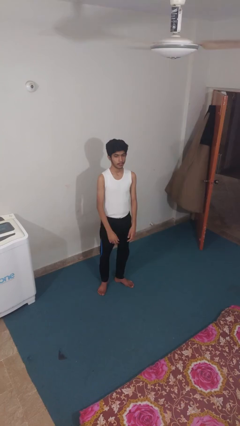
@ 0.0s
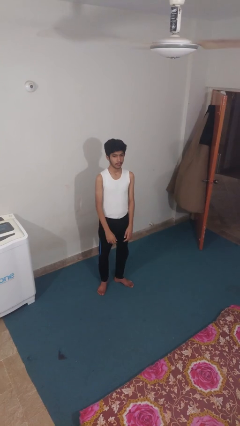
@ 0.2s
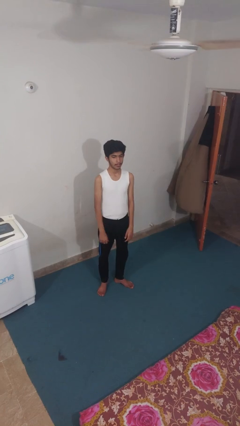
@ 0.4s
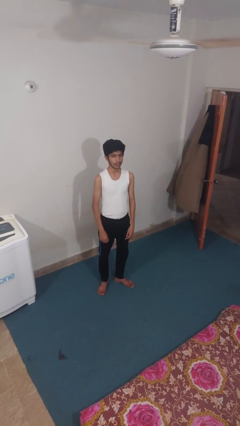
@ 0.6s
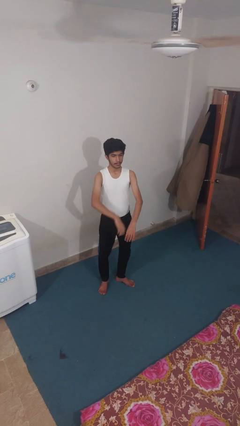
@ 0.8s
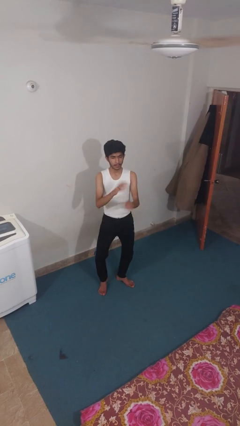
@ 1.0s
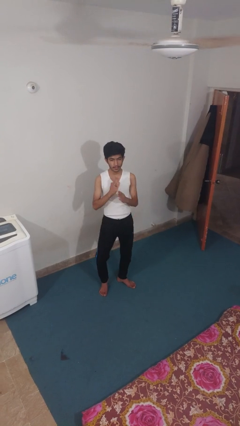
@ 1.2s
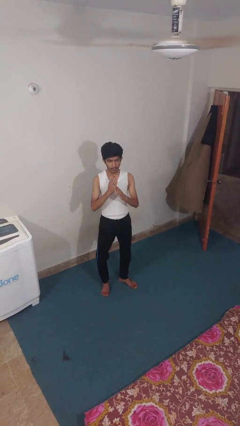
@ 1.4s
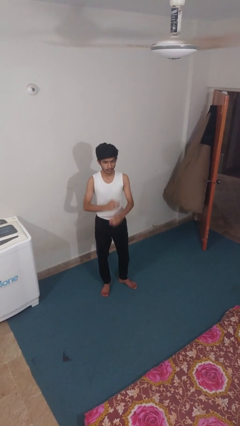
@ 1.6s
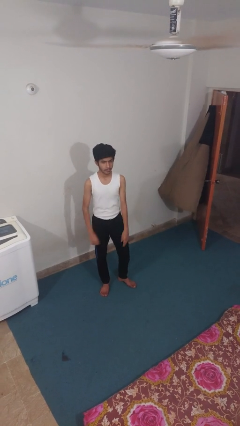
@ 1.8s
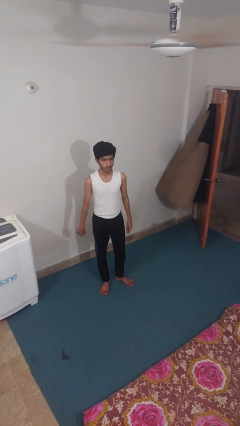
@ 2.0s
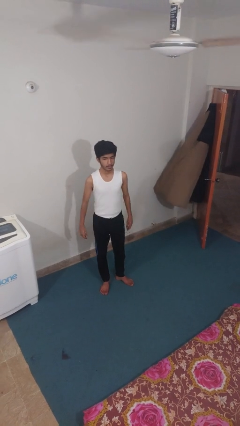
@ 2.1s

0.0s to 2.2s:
person karate chop

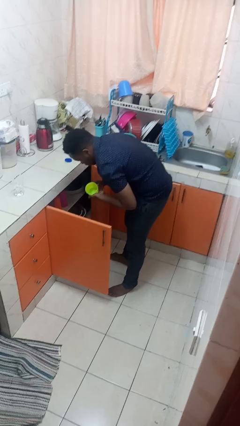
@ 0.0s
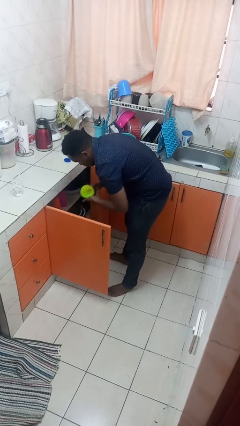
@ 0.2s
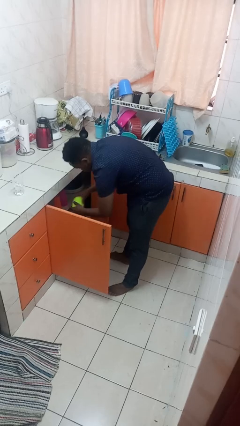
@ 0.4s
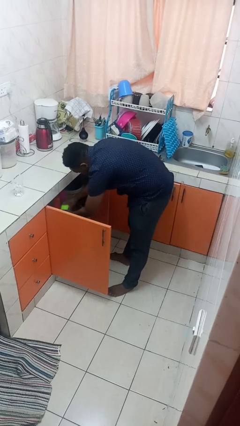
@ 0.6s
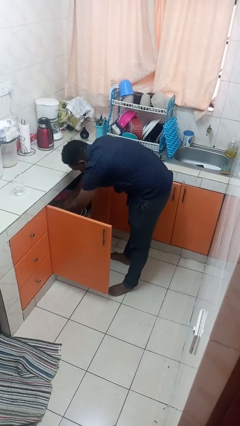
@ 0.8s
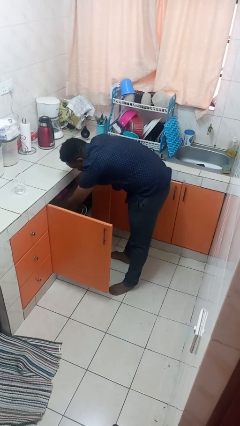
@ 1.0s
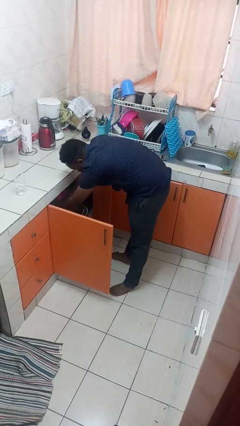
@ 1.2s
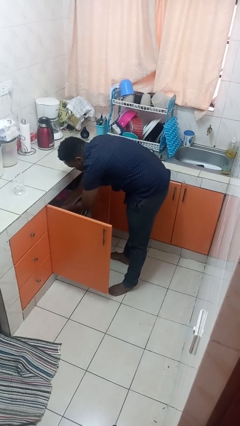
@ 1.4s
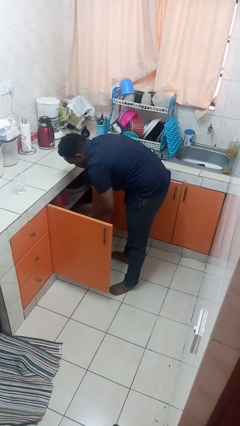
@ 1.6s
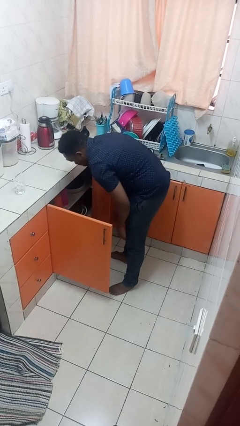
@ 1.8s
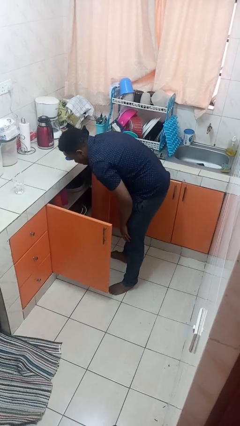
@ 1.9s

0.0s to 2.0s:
person puts object in cabinet

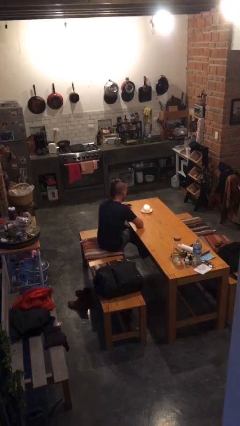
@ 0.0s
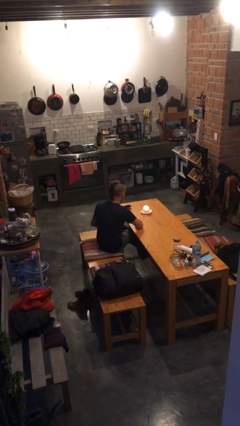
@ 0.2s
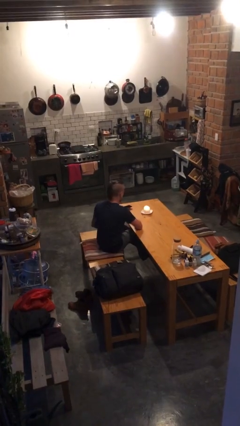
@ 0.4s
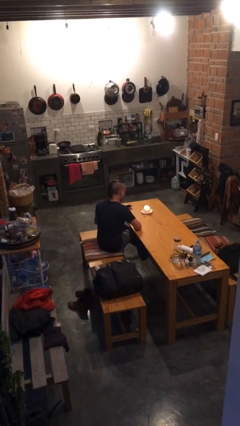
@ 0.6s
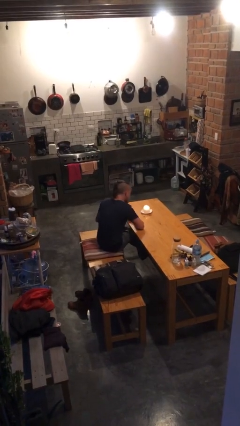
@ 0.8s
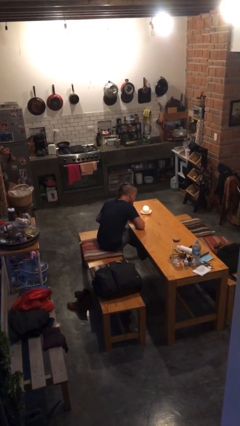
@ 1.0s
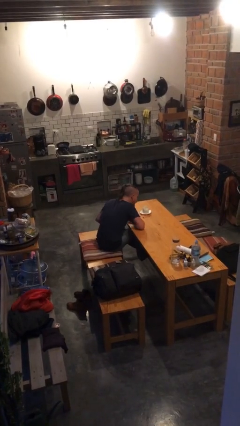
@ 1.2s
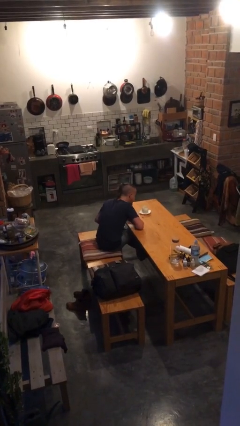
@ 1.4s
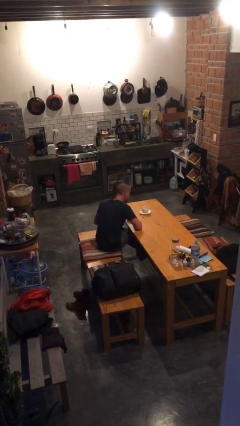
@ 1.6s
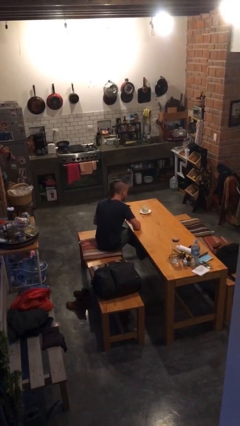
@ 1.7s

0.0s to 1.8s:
person extinguishes candle

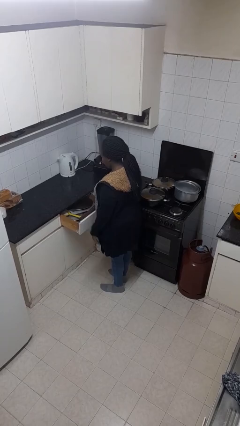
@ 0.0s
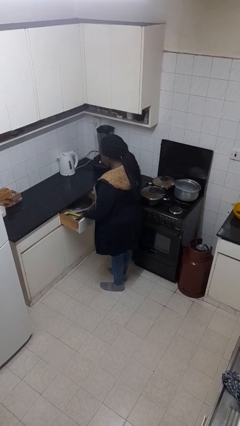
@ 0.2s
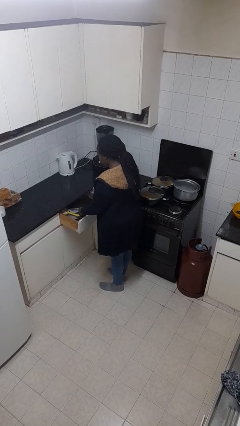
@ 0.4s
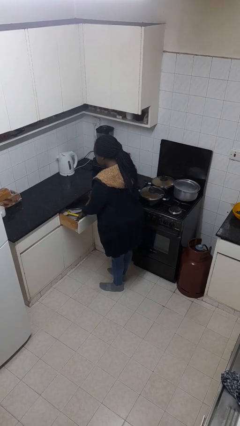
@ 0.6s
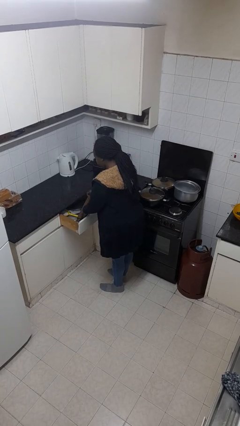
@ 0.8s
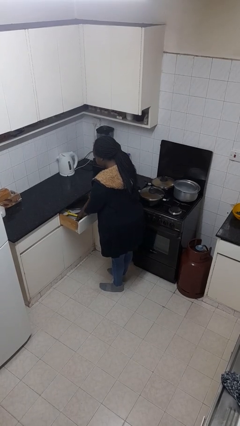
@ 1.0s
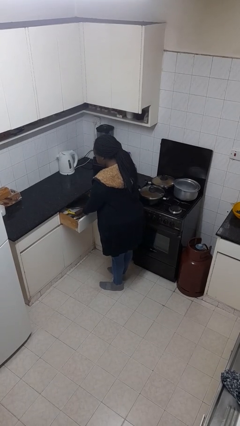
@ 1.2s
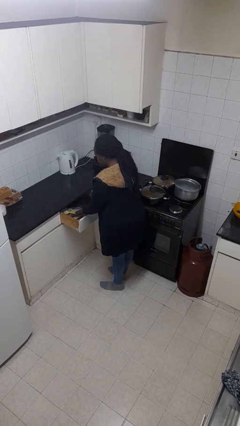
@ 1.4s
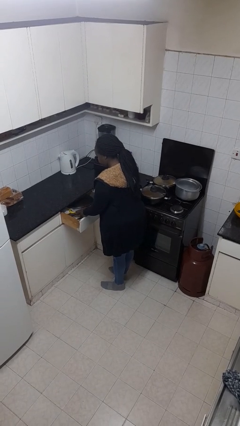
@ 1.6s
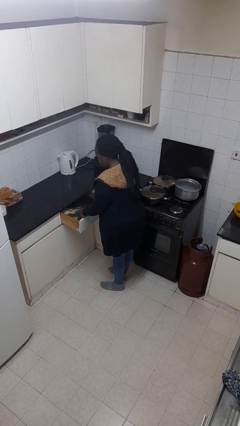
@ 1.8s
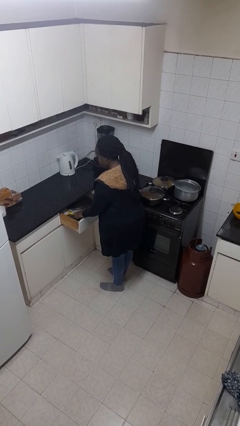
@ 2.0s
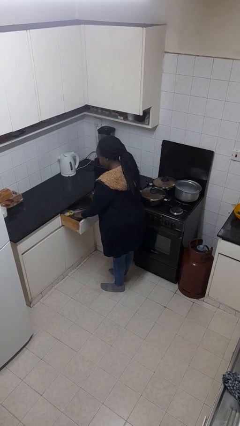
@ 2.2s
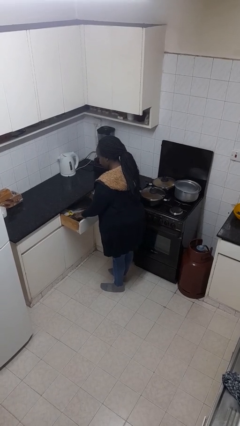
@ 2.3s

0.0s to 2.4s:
person searches in kitchen drawer

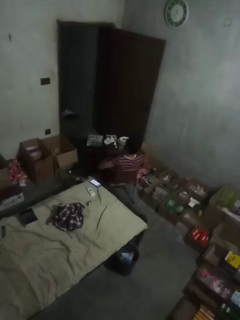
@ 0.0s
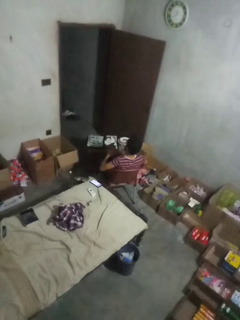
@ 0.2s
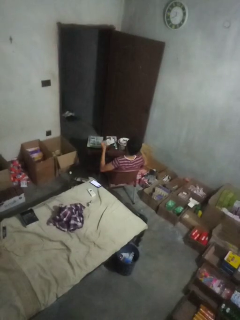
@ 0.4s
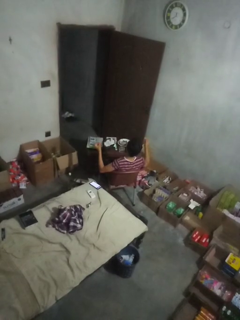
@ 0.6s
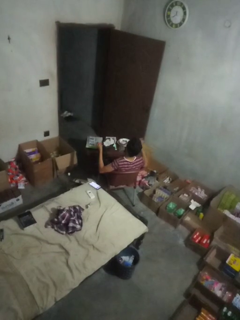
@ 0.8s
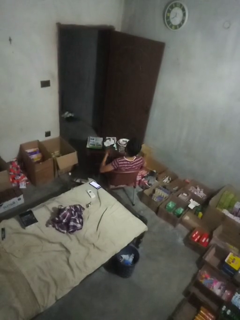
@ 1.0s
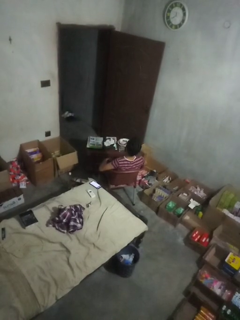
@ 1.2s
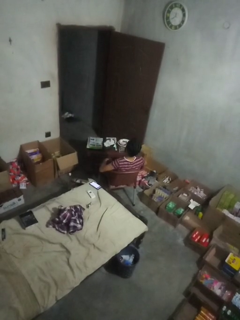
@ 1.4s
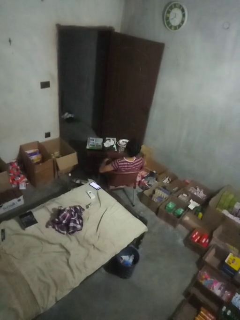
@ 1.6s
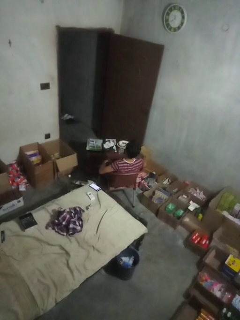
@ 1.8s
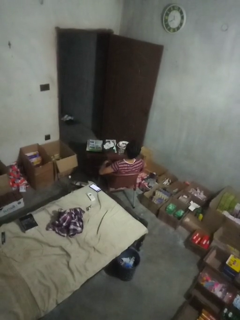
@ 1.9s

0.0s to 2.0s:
person snaps fingers

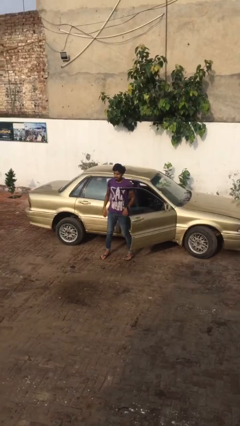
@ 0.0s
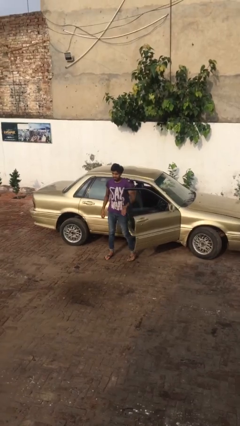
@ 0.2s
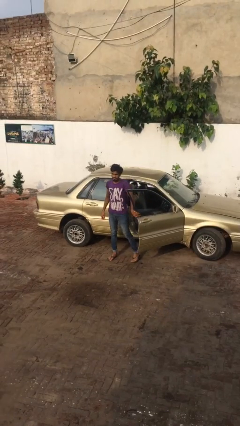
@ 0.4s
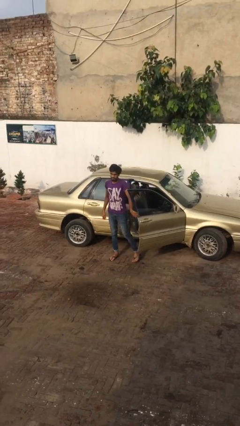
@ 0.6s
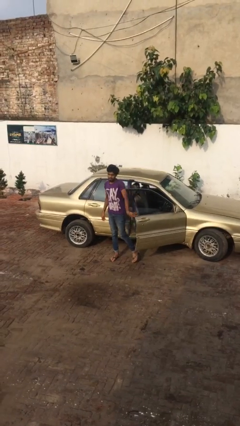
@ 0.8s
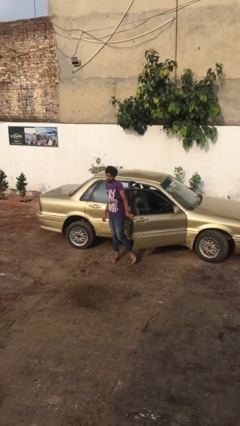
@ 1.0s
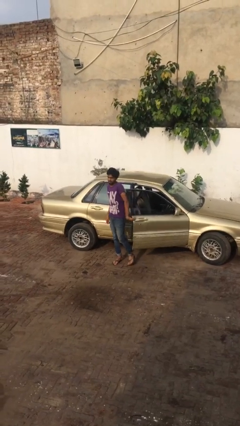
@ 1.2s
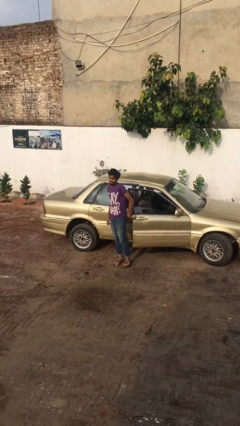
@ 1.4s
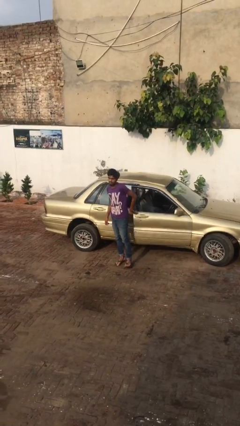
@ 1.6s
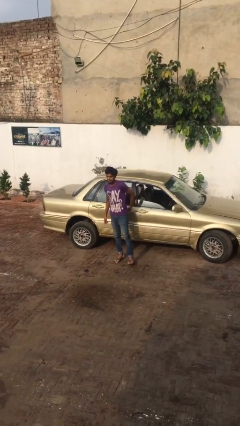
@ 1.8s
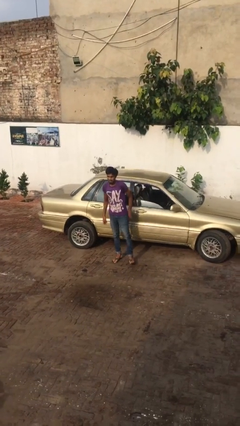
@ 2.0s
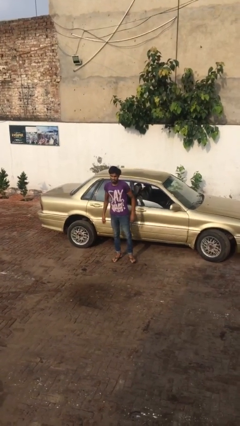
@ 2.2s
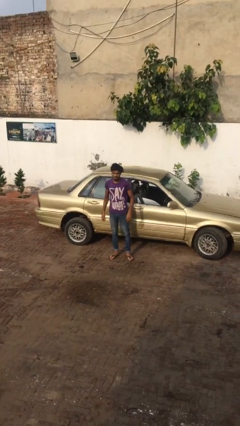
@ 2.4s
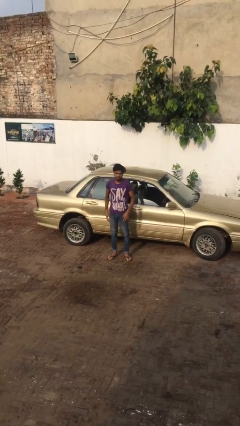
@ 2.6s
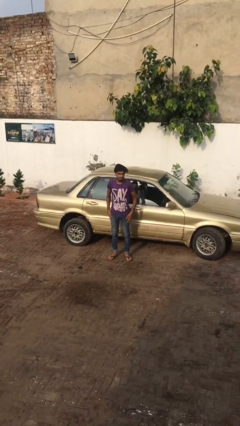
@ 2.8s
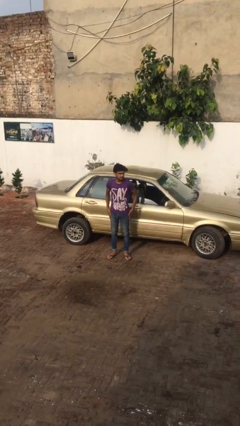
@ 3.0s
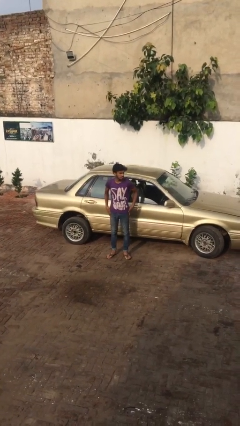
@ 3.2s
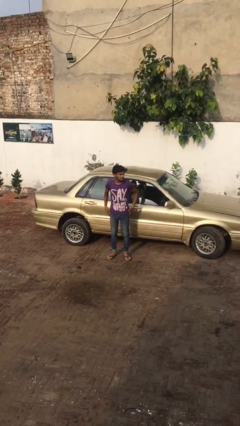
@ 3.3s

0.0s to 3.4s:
person closes car door

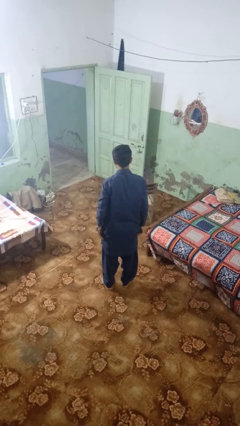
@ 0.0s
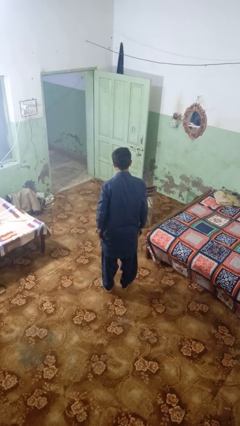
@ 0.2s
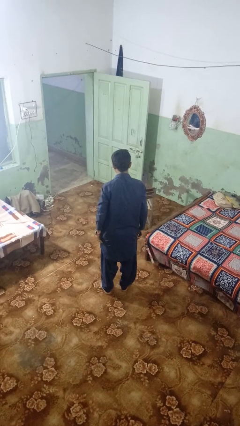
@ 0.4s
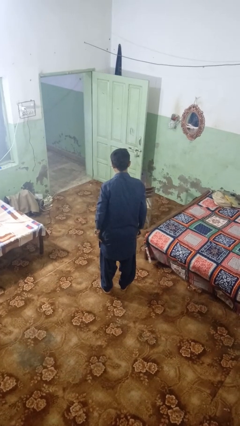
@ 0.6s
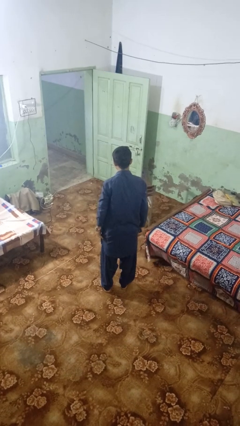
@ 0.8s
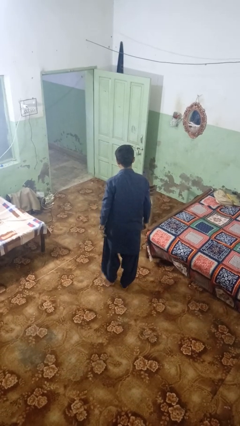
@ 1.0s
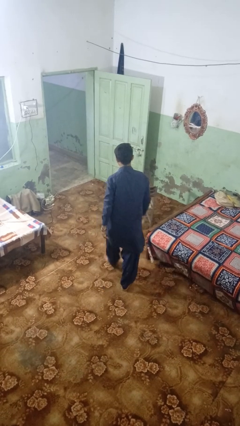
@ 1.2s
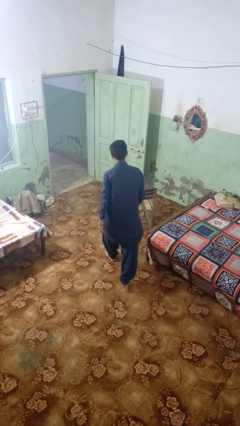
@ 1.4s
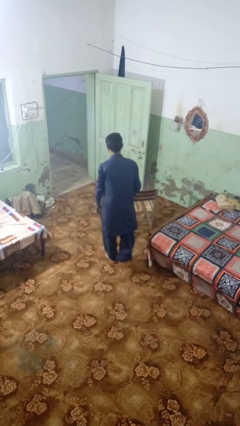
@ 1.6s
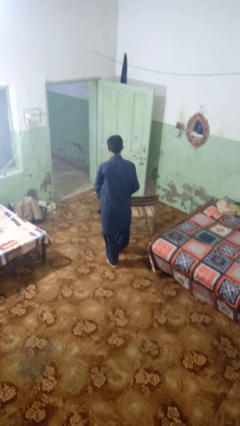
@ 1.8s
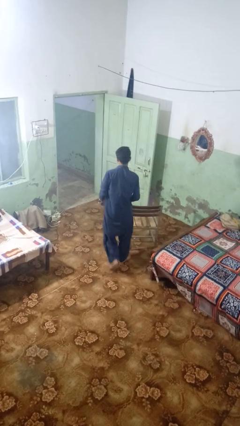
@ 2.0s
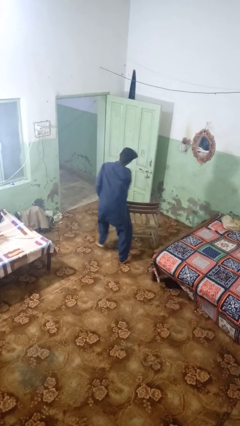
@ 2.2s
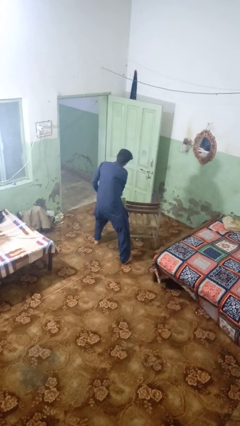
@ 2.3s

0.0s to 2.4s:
person trips on object on floor

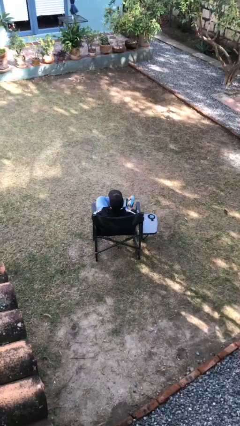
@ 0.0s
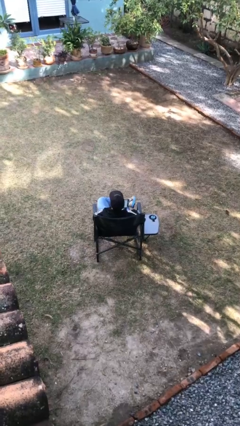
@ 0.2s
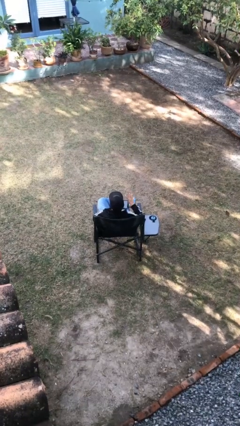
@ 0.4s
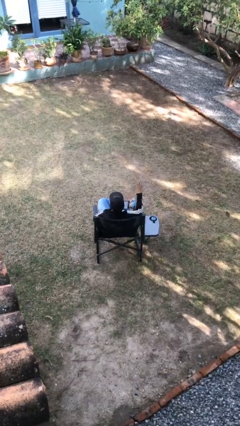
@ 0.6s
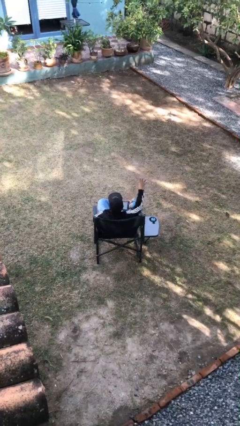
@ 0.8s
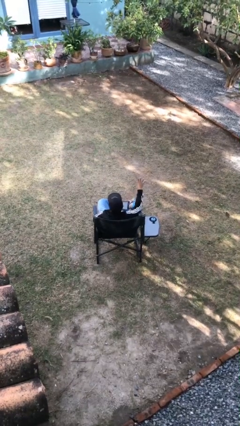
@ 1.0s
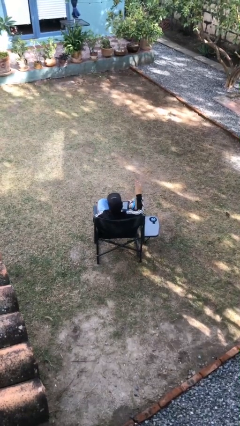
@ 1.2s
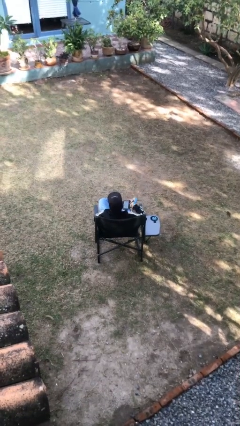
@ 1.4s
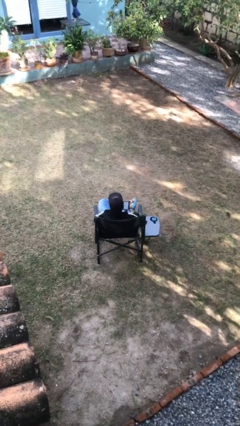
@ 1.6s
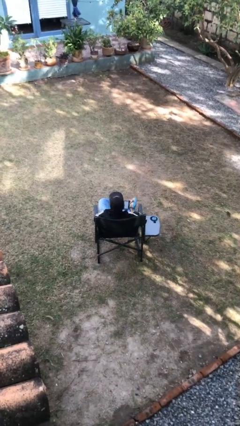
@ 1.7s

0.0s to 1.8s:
person gestures number four
